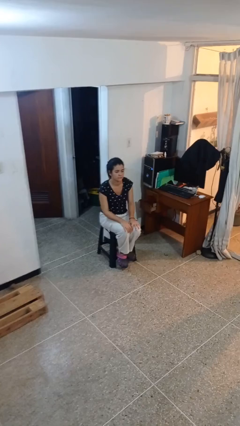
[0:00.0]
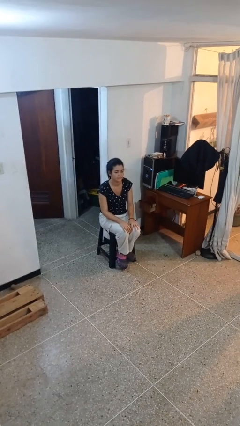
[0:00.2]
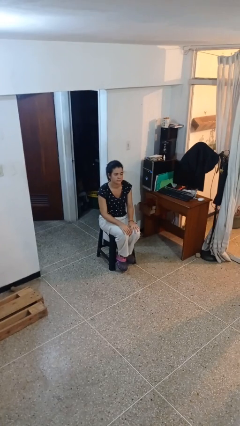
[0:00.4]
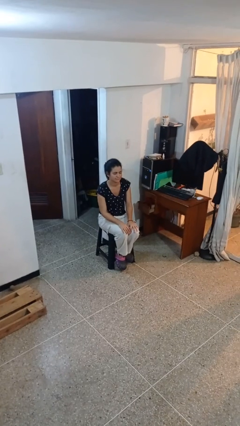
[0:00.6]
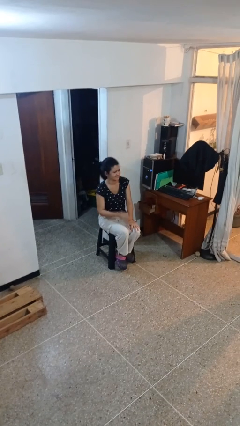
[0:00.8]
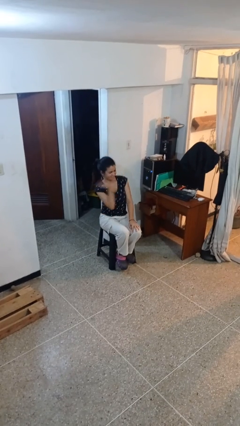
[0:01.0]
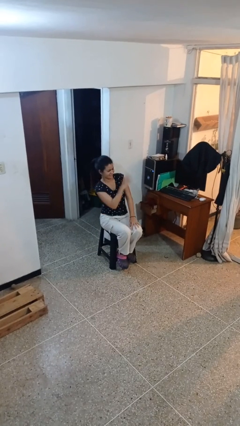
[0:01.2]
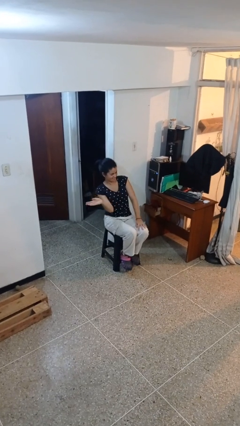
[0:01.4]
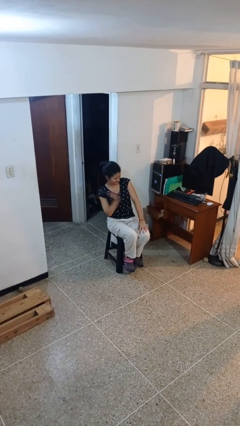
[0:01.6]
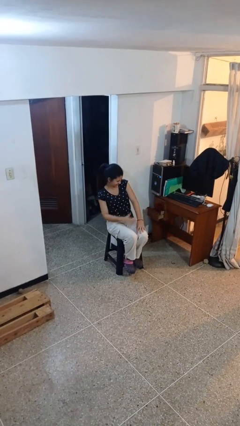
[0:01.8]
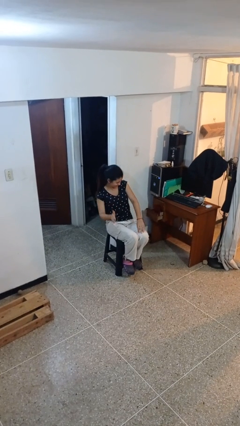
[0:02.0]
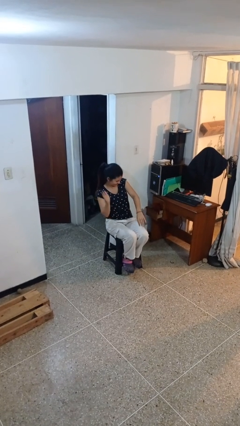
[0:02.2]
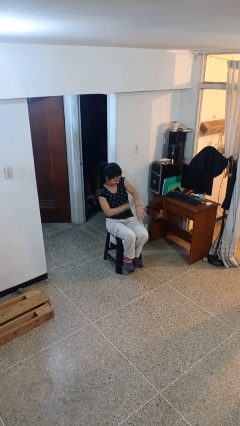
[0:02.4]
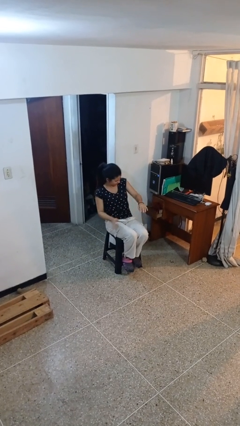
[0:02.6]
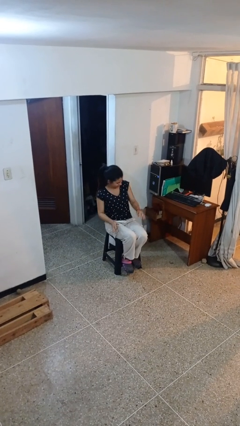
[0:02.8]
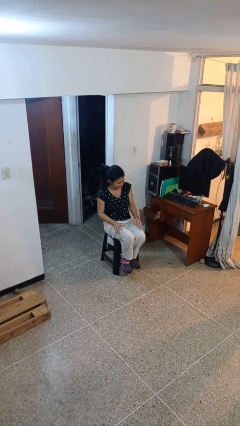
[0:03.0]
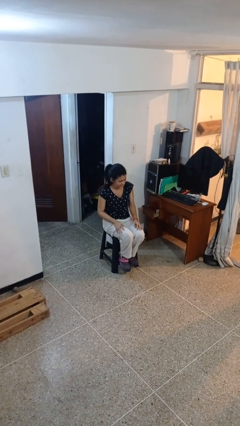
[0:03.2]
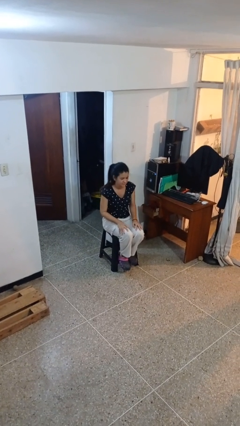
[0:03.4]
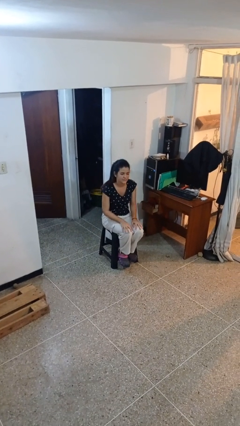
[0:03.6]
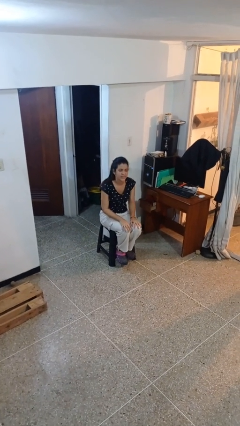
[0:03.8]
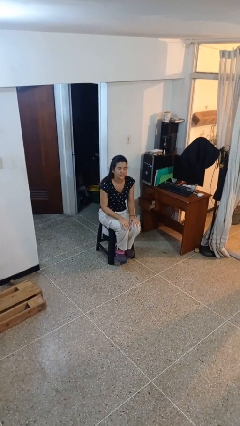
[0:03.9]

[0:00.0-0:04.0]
person swats bug

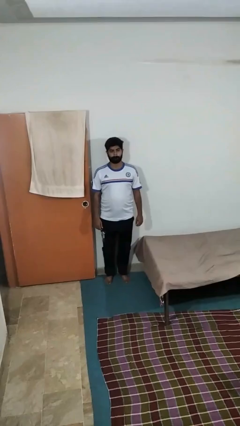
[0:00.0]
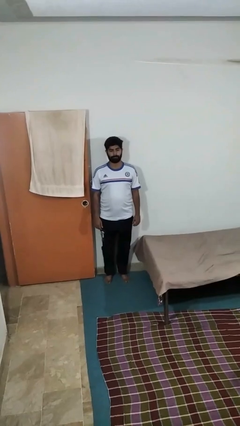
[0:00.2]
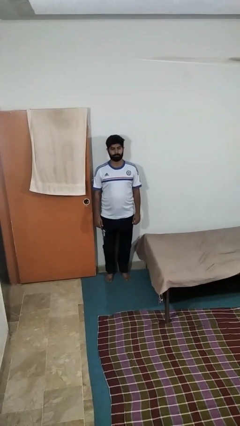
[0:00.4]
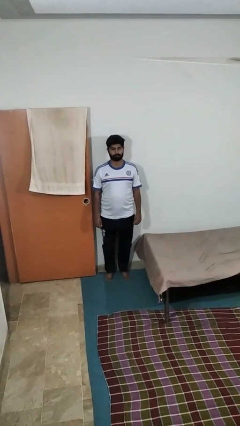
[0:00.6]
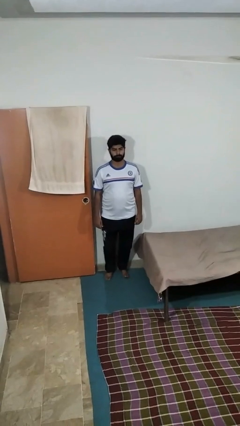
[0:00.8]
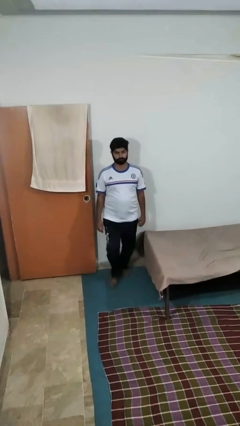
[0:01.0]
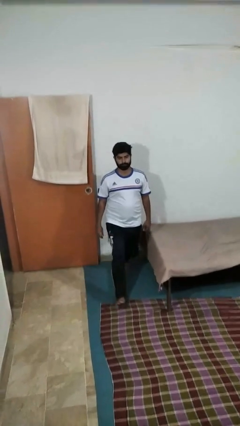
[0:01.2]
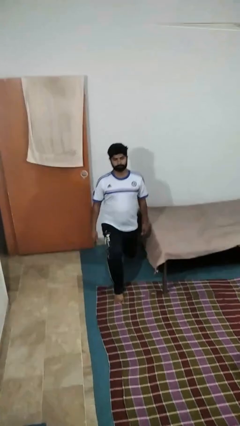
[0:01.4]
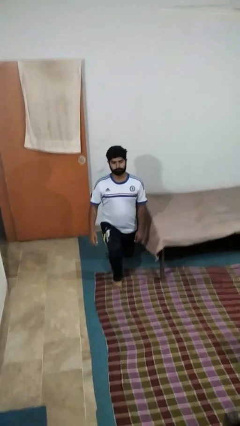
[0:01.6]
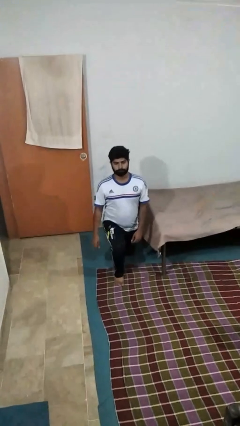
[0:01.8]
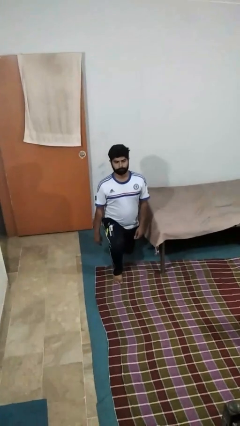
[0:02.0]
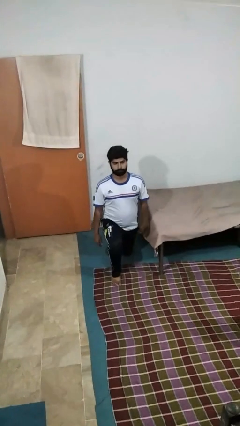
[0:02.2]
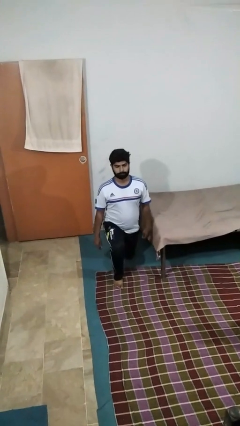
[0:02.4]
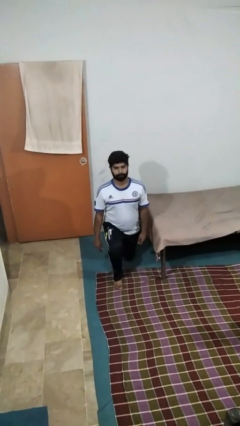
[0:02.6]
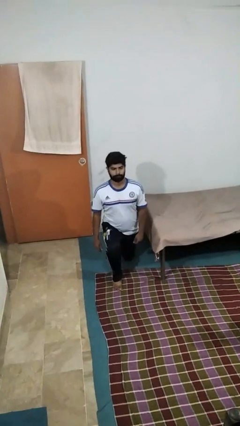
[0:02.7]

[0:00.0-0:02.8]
person kneels

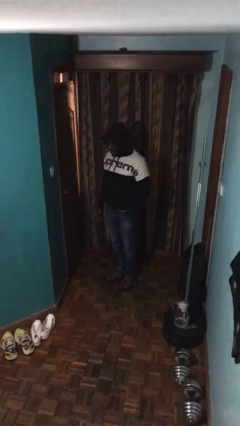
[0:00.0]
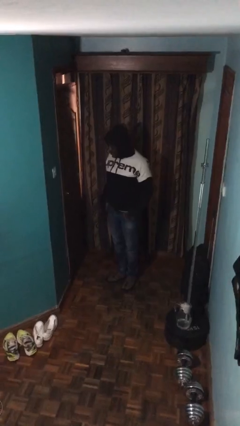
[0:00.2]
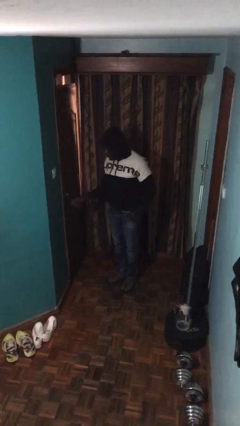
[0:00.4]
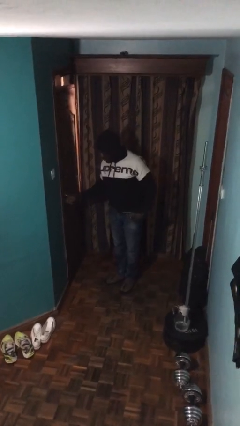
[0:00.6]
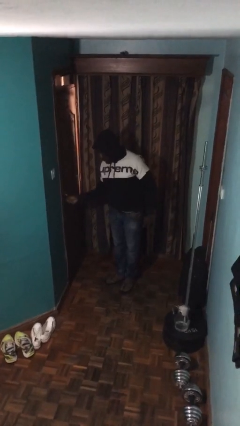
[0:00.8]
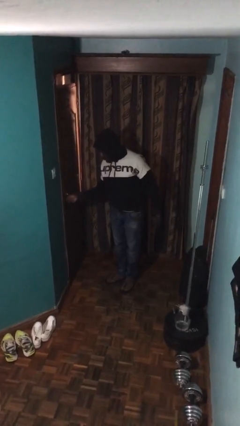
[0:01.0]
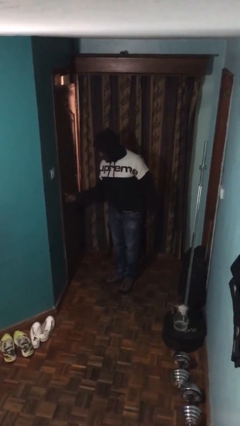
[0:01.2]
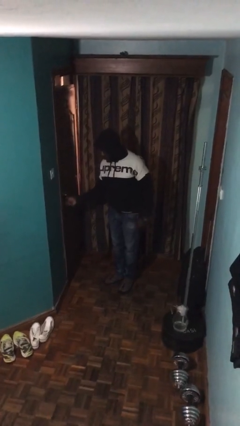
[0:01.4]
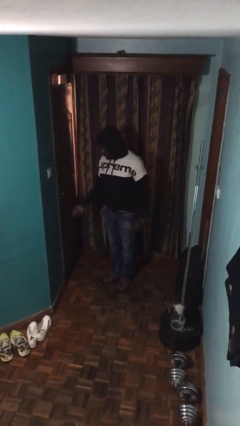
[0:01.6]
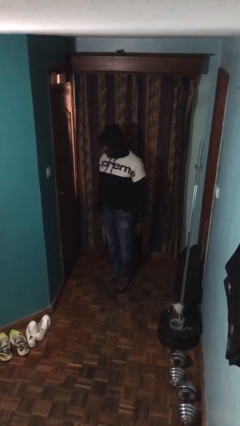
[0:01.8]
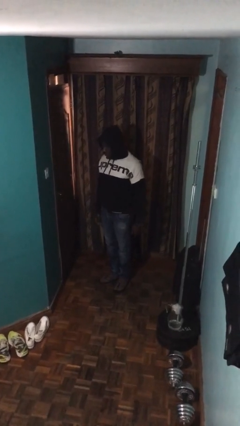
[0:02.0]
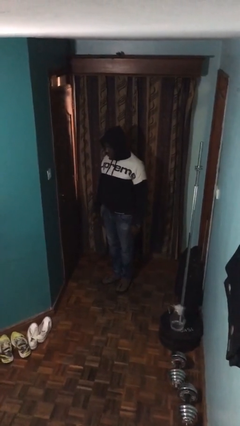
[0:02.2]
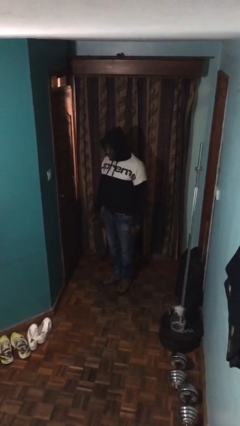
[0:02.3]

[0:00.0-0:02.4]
person unlocks door with keys

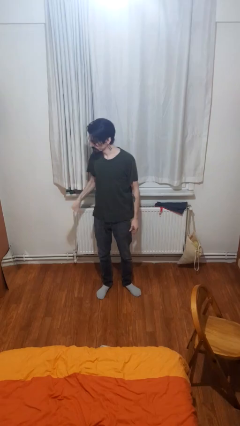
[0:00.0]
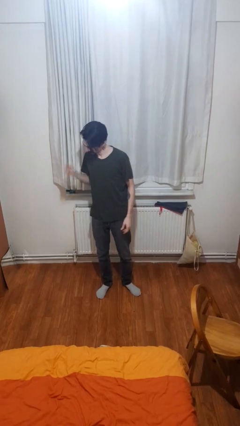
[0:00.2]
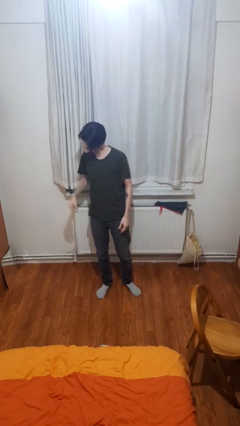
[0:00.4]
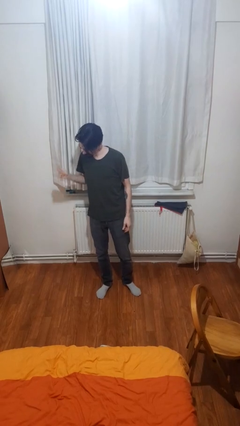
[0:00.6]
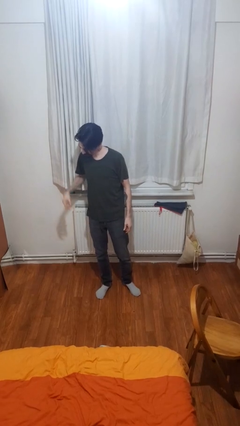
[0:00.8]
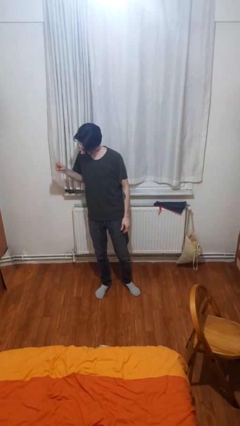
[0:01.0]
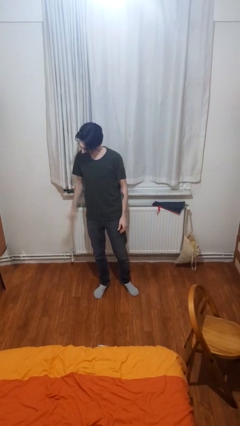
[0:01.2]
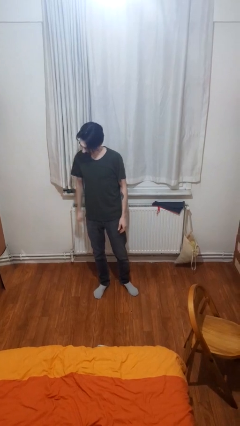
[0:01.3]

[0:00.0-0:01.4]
person snaps fingers

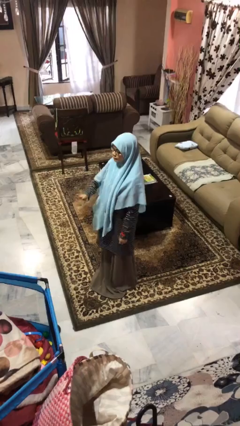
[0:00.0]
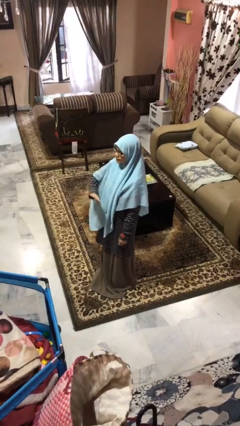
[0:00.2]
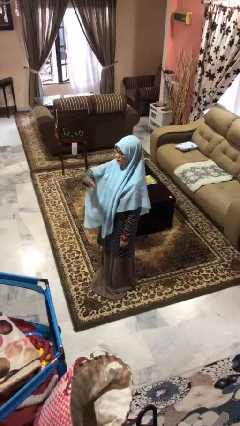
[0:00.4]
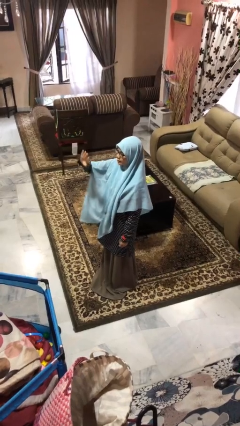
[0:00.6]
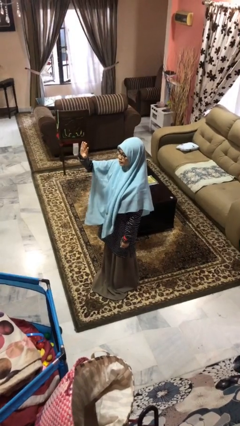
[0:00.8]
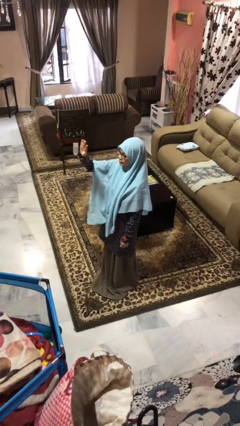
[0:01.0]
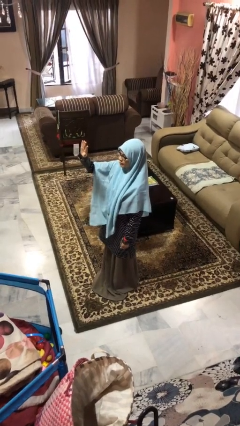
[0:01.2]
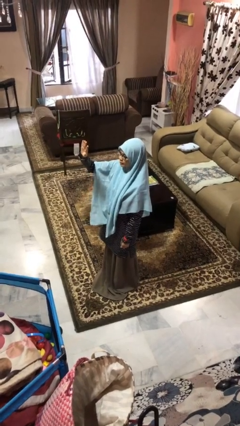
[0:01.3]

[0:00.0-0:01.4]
person gestures swipe up

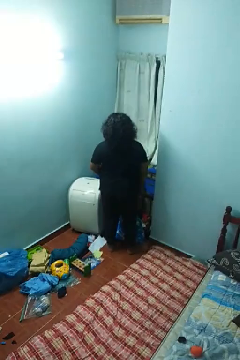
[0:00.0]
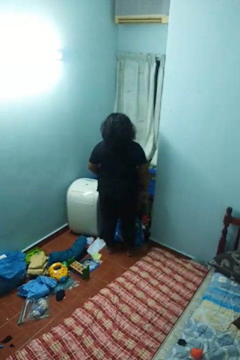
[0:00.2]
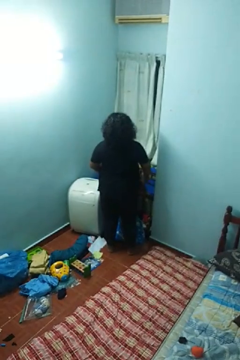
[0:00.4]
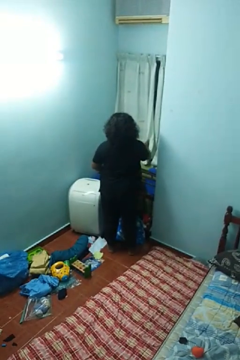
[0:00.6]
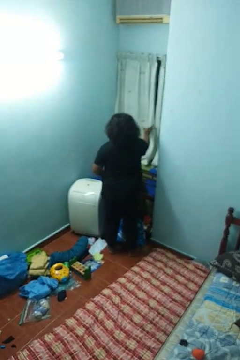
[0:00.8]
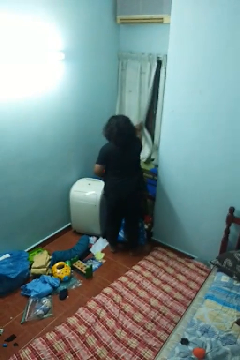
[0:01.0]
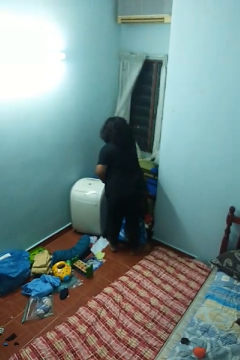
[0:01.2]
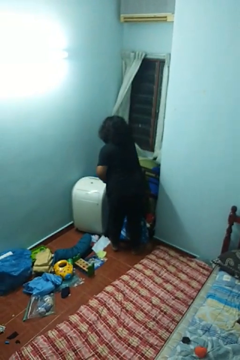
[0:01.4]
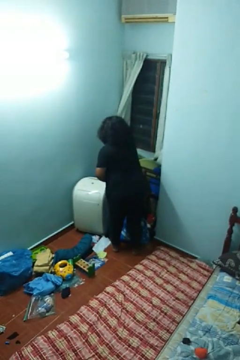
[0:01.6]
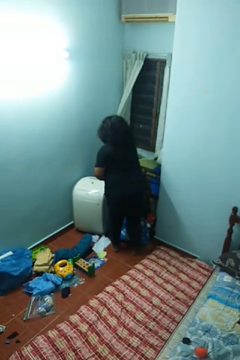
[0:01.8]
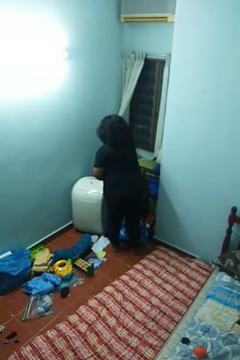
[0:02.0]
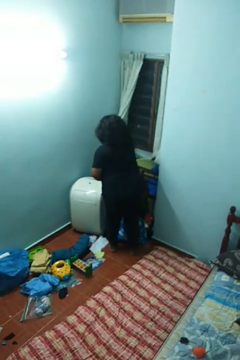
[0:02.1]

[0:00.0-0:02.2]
person opens curtains

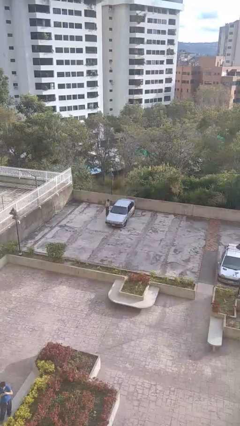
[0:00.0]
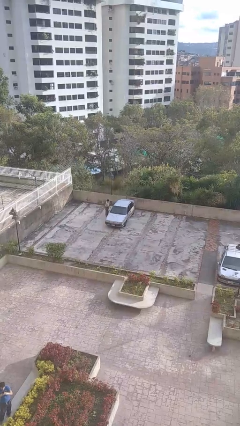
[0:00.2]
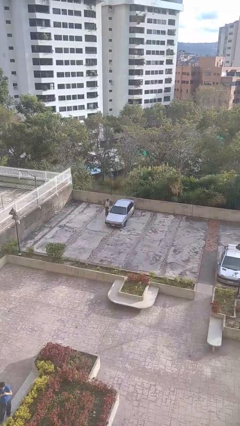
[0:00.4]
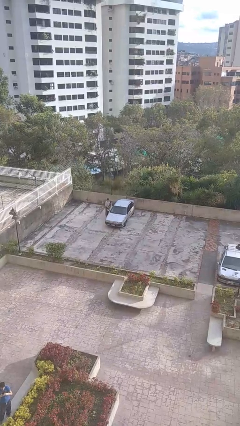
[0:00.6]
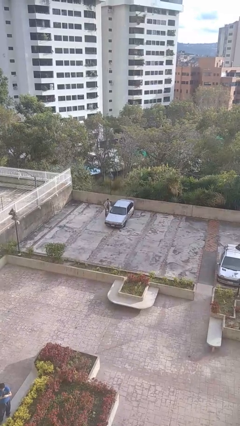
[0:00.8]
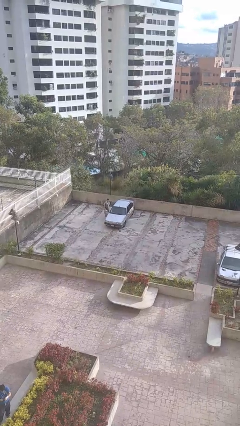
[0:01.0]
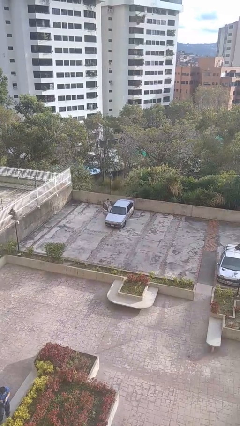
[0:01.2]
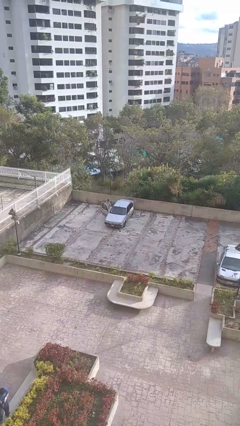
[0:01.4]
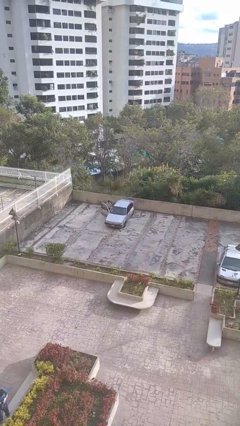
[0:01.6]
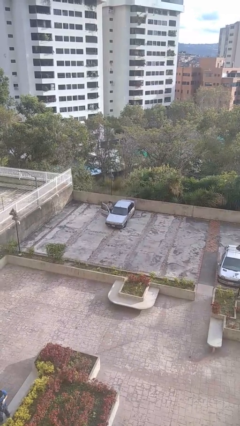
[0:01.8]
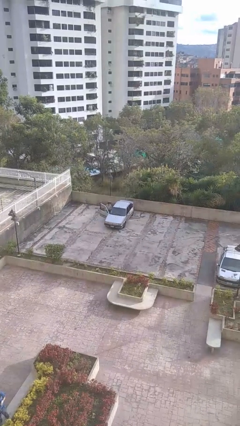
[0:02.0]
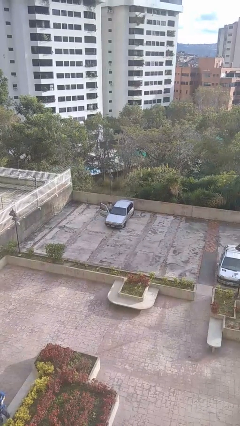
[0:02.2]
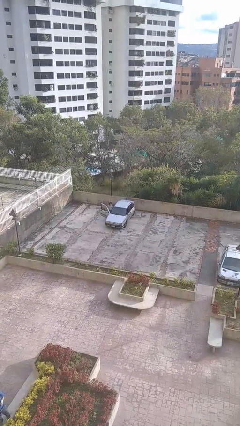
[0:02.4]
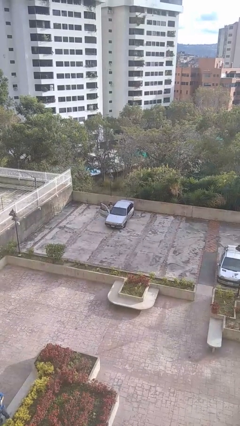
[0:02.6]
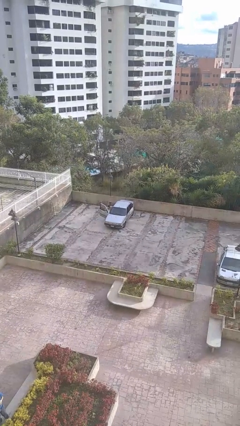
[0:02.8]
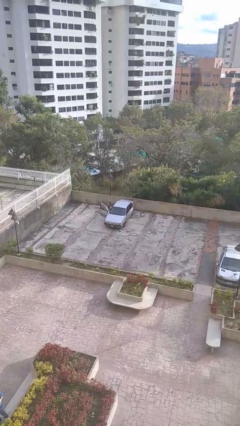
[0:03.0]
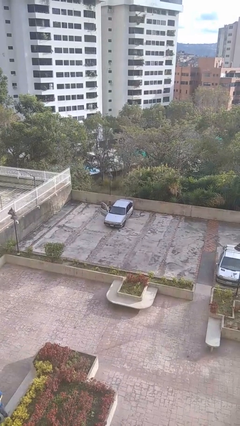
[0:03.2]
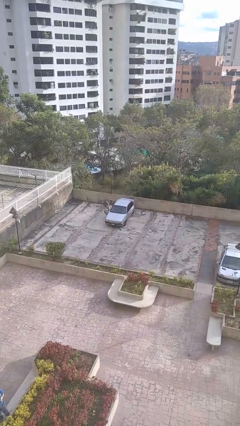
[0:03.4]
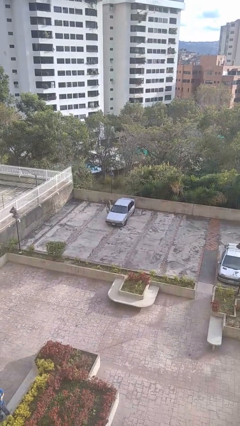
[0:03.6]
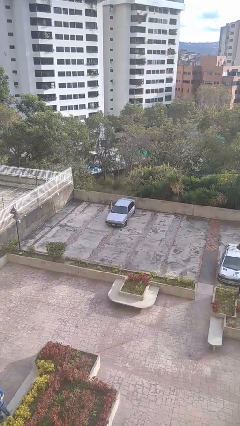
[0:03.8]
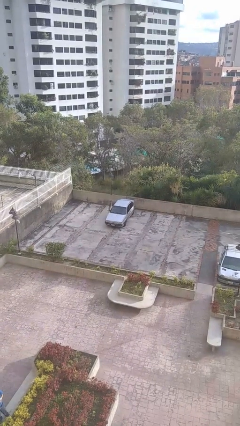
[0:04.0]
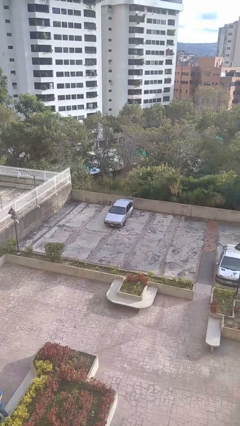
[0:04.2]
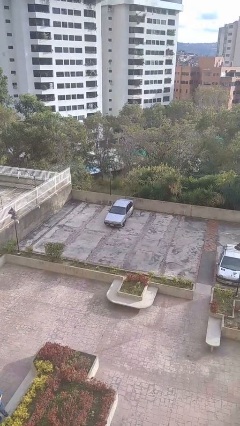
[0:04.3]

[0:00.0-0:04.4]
car picks up person
